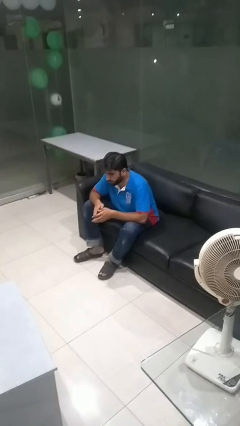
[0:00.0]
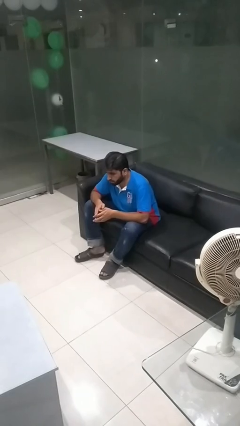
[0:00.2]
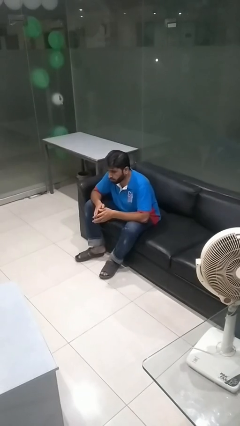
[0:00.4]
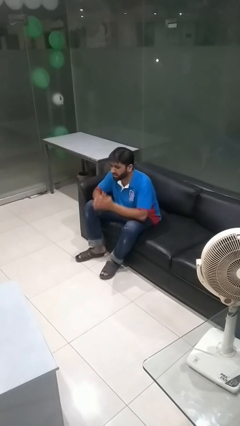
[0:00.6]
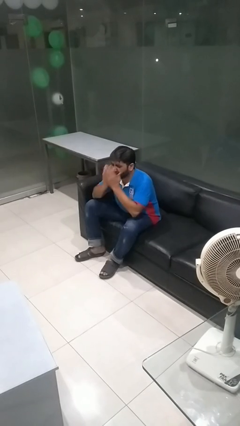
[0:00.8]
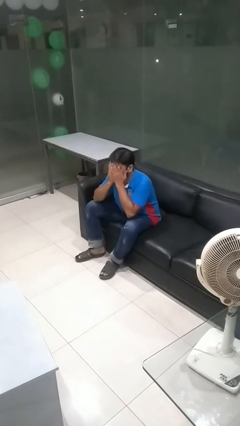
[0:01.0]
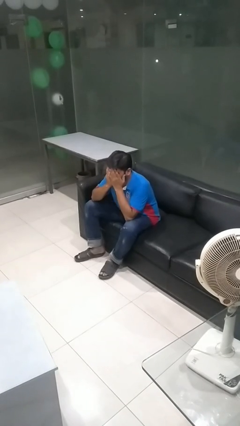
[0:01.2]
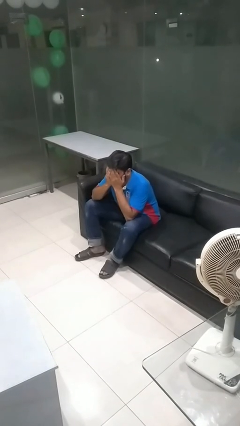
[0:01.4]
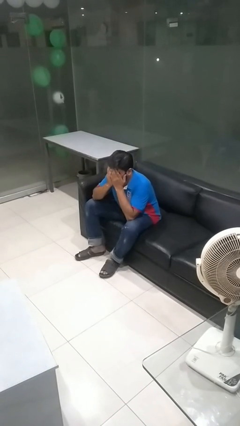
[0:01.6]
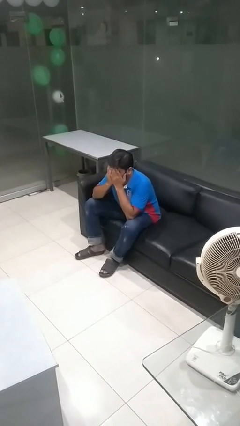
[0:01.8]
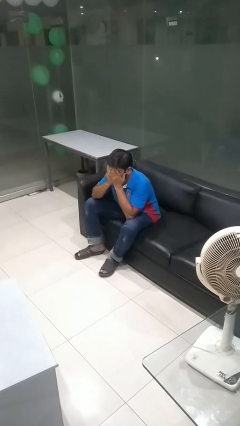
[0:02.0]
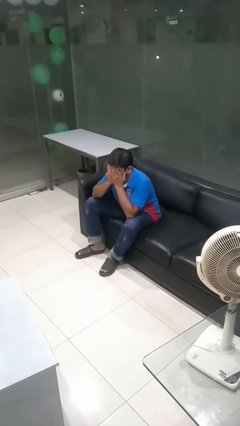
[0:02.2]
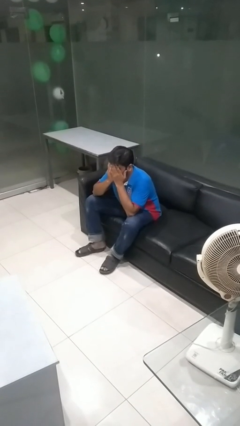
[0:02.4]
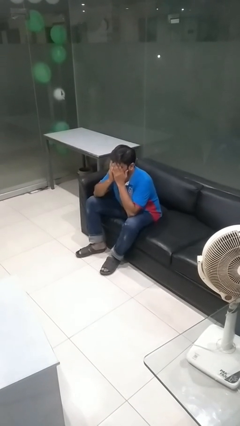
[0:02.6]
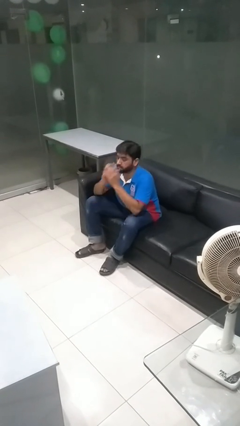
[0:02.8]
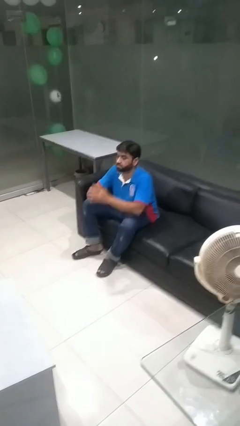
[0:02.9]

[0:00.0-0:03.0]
person covers face with hands

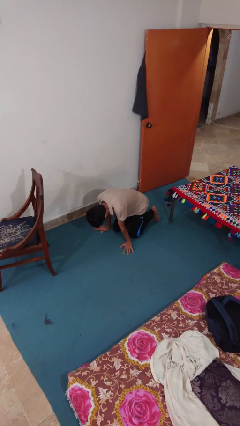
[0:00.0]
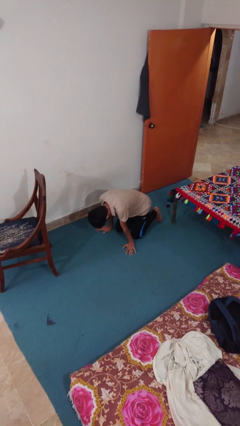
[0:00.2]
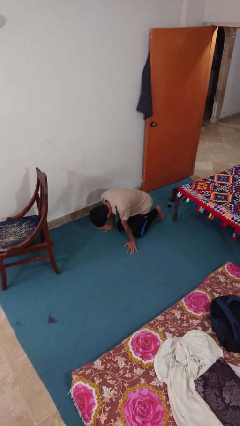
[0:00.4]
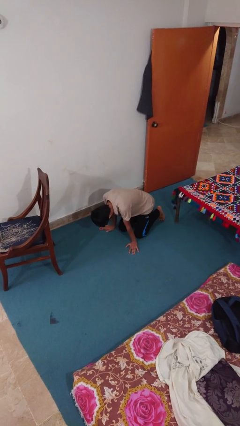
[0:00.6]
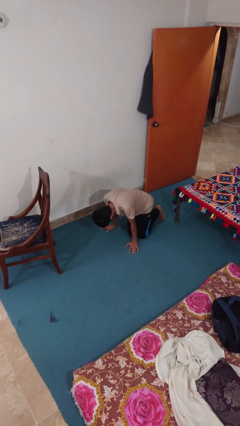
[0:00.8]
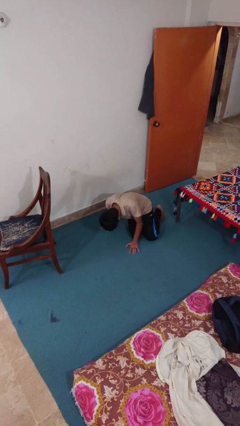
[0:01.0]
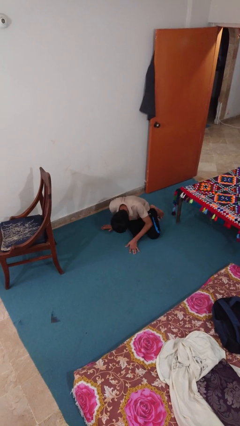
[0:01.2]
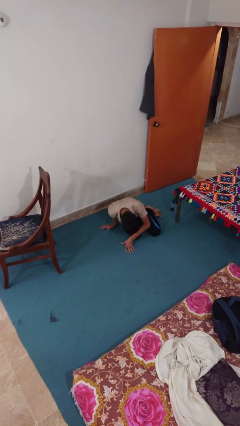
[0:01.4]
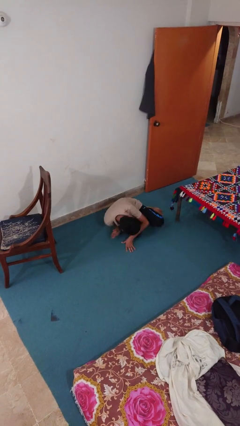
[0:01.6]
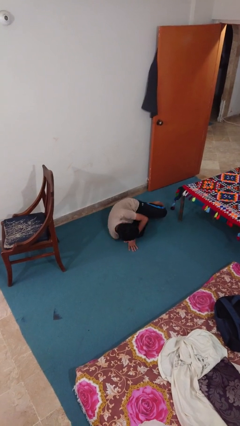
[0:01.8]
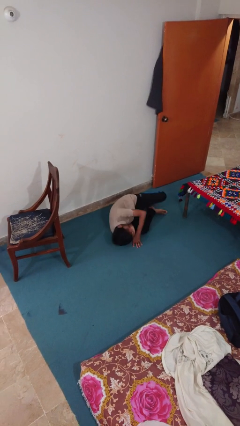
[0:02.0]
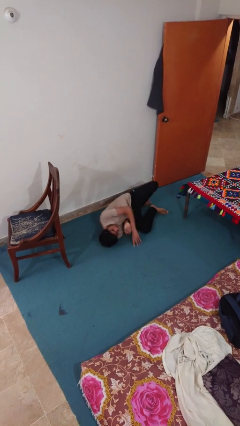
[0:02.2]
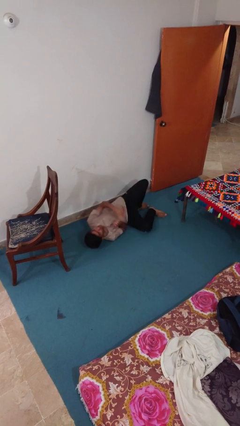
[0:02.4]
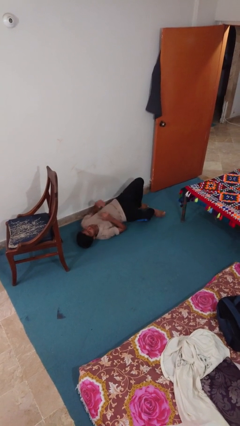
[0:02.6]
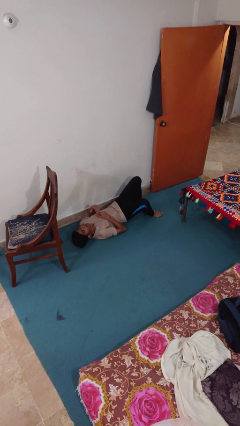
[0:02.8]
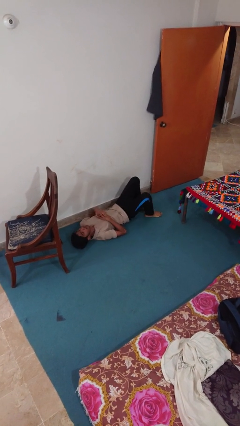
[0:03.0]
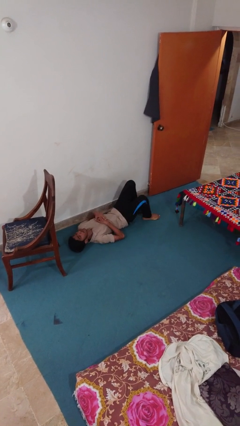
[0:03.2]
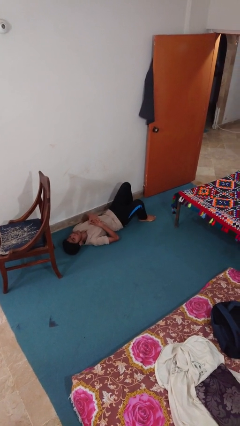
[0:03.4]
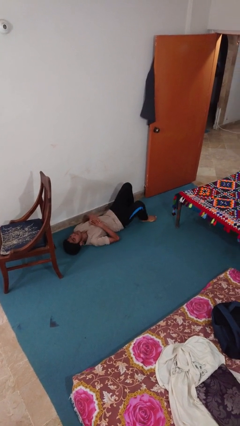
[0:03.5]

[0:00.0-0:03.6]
person lies down on floor

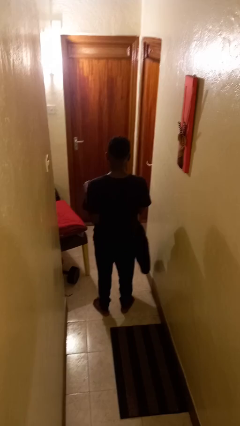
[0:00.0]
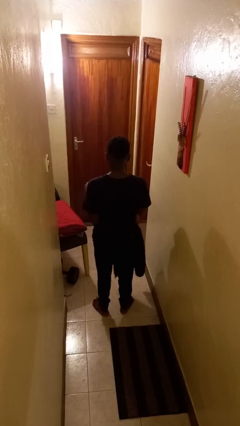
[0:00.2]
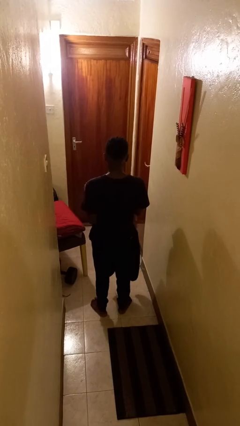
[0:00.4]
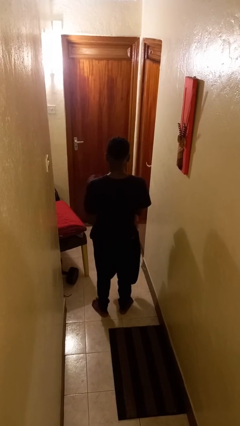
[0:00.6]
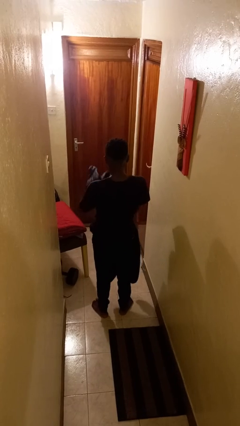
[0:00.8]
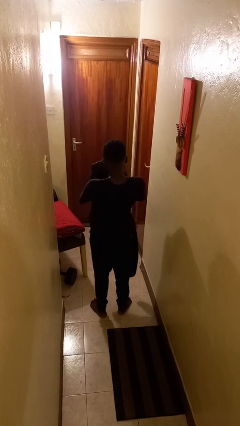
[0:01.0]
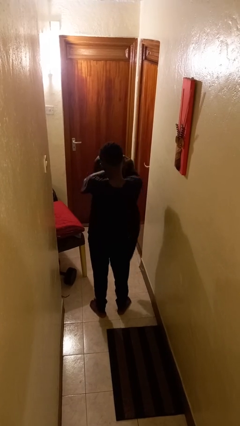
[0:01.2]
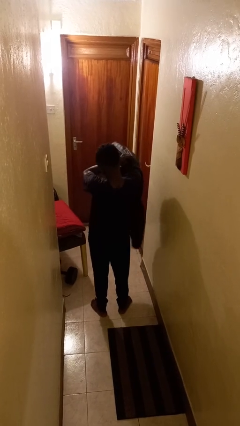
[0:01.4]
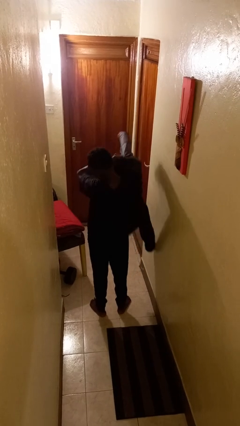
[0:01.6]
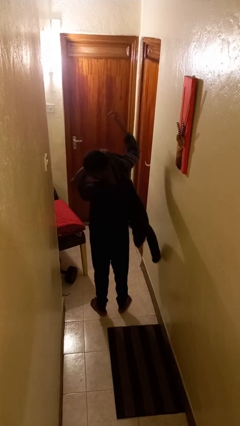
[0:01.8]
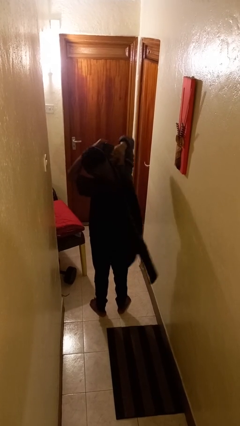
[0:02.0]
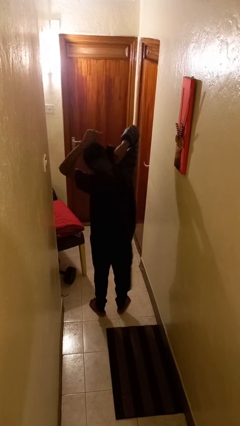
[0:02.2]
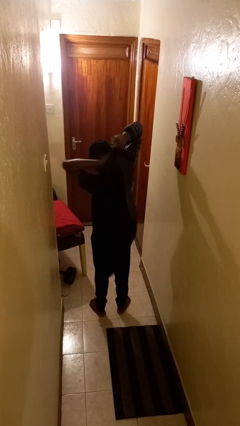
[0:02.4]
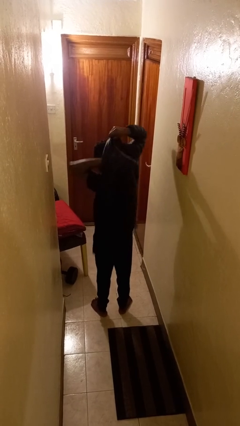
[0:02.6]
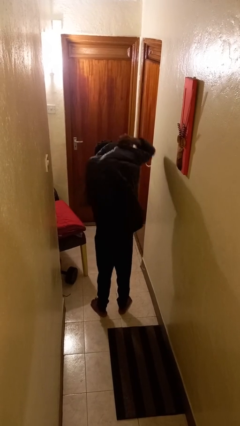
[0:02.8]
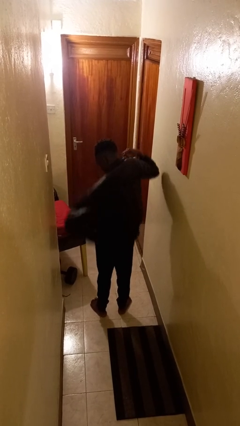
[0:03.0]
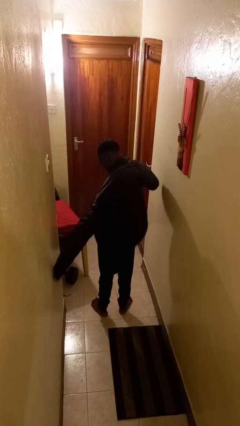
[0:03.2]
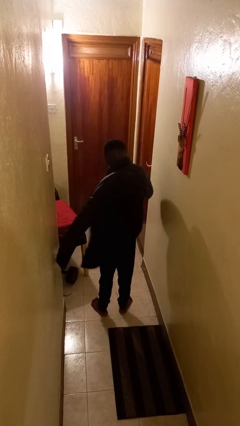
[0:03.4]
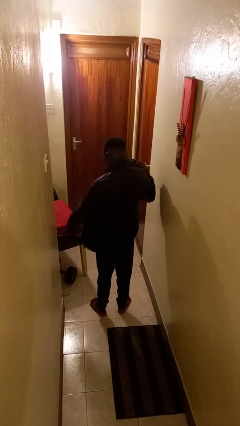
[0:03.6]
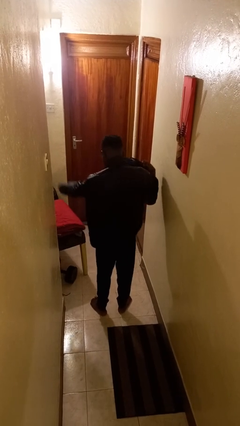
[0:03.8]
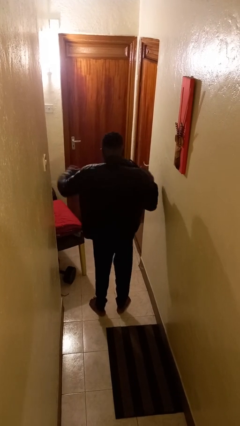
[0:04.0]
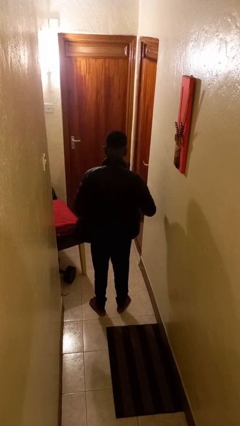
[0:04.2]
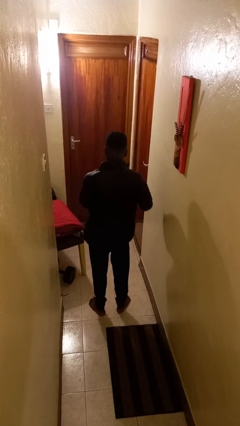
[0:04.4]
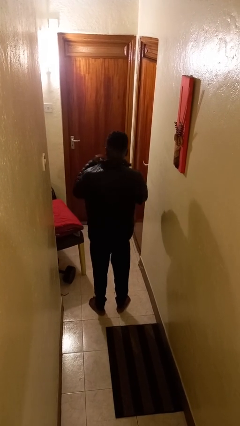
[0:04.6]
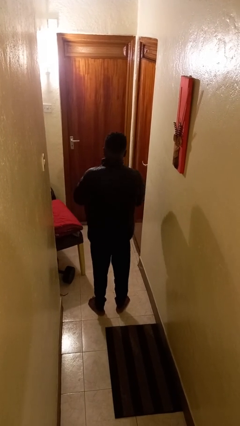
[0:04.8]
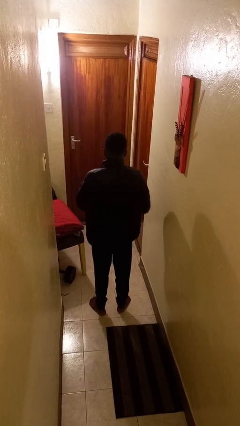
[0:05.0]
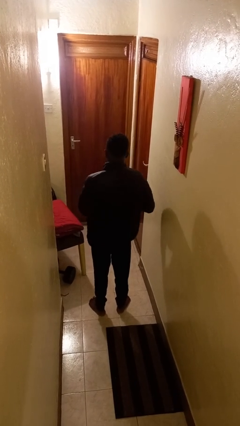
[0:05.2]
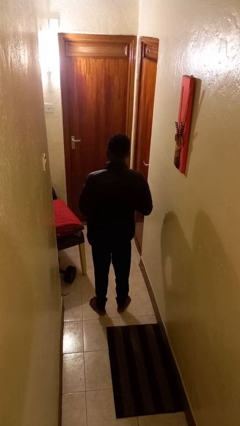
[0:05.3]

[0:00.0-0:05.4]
person puts on jacket

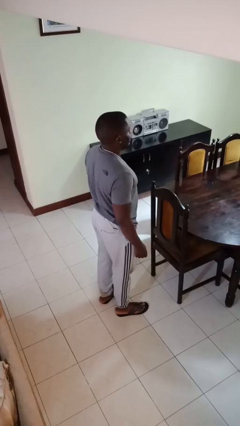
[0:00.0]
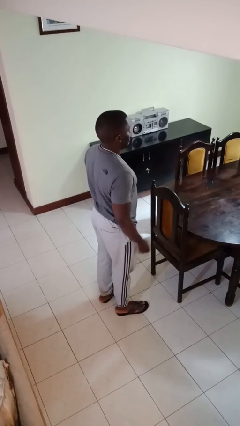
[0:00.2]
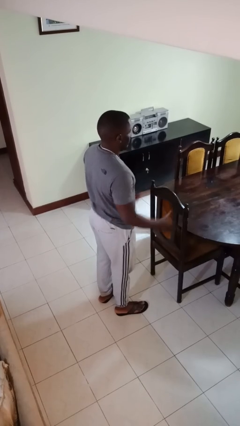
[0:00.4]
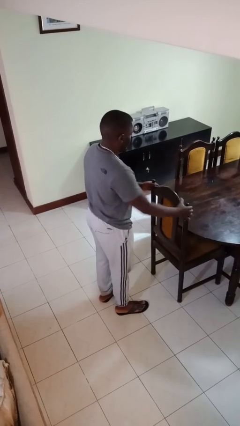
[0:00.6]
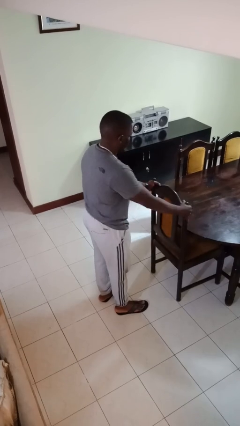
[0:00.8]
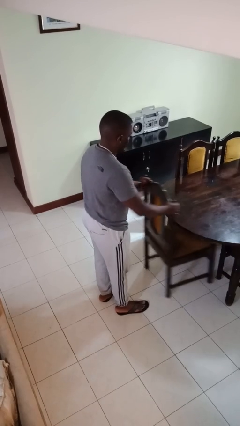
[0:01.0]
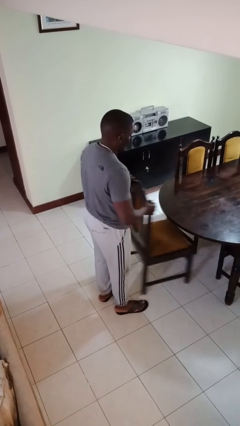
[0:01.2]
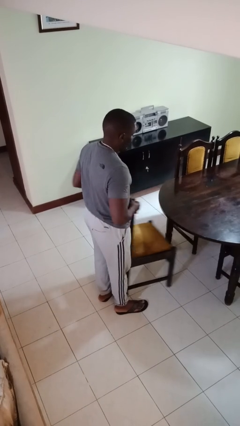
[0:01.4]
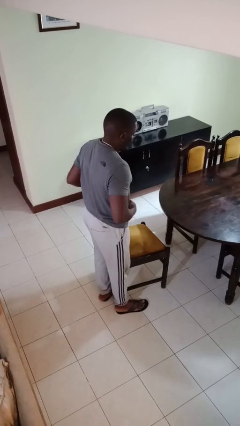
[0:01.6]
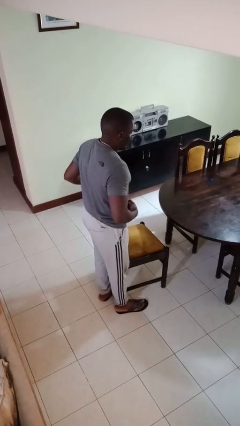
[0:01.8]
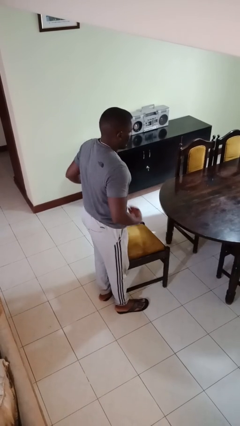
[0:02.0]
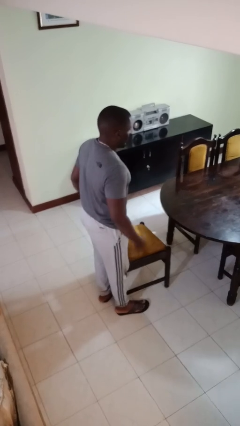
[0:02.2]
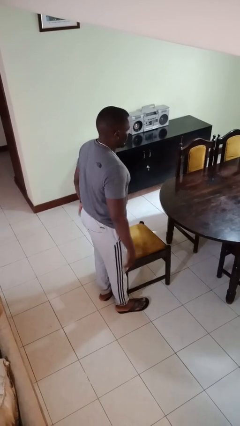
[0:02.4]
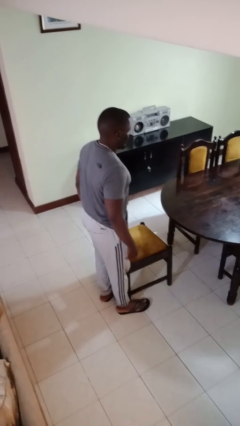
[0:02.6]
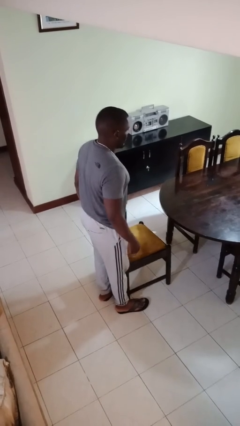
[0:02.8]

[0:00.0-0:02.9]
person pulls out chair

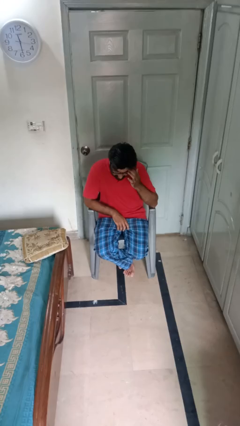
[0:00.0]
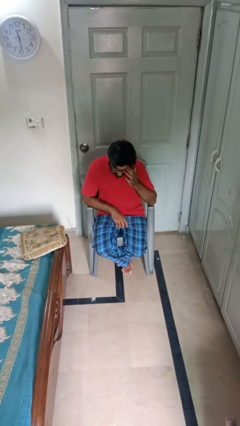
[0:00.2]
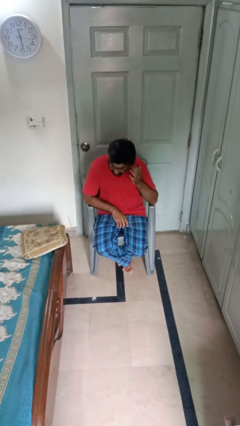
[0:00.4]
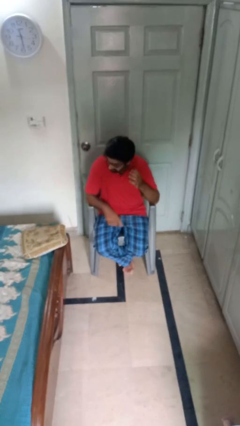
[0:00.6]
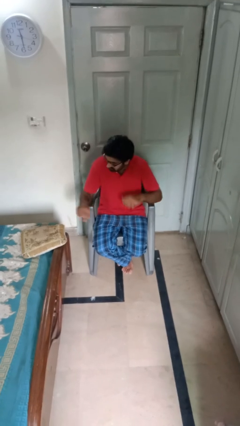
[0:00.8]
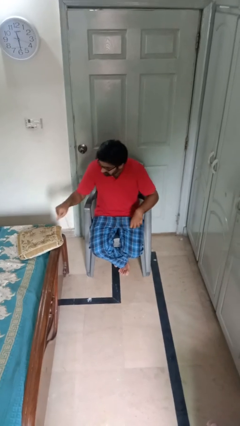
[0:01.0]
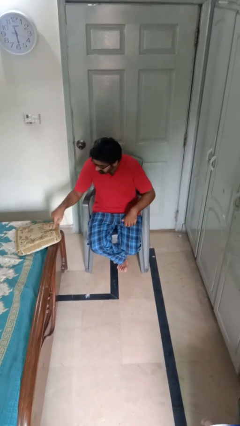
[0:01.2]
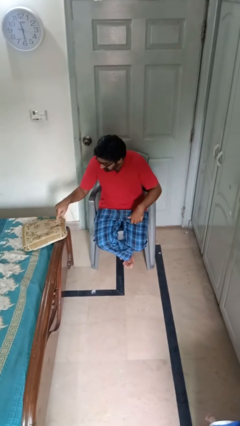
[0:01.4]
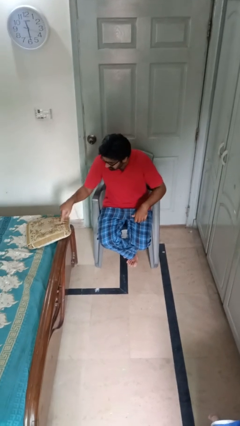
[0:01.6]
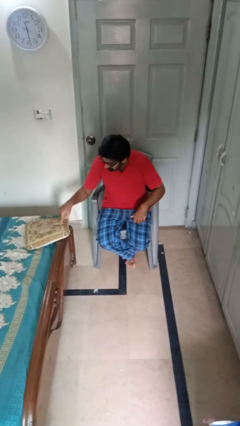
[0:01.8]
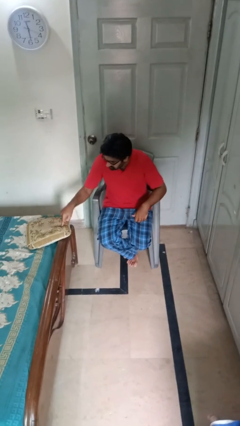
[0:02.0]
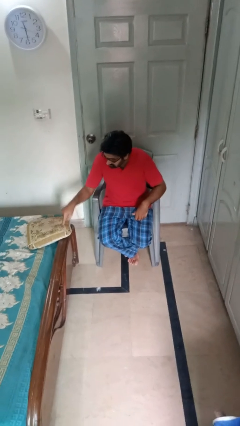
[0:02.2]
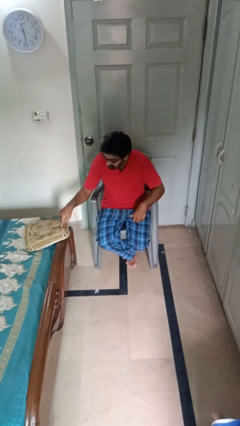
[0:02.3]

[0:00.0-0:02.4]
person taps object with finger

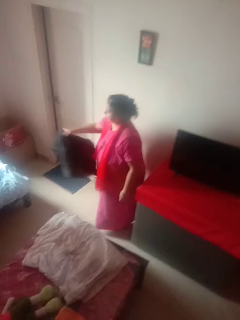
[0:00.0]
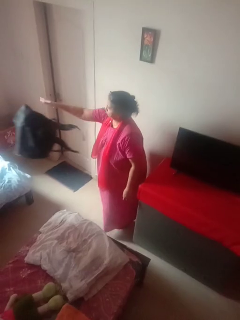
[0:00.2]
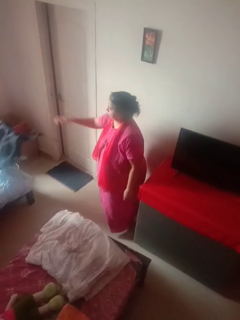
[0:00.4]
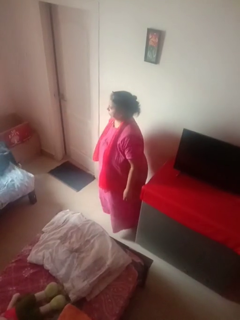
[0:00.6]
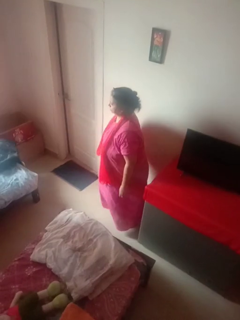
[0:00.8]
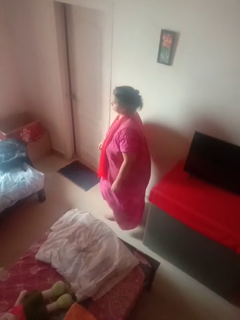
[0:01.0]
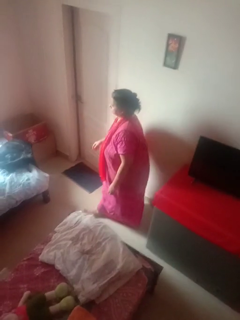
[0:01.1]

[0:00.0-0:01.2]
person throws object on bed
